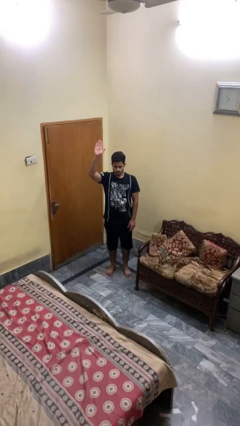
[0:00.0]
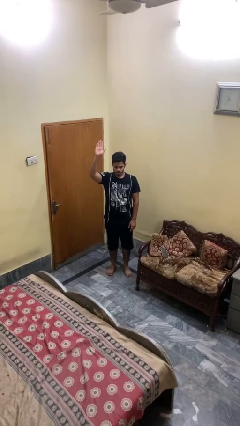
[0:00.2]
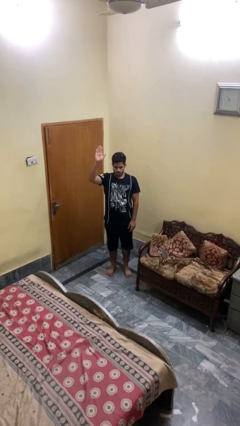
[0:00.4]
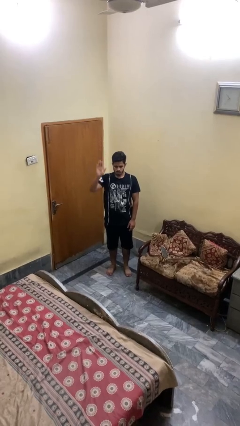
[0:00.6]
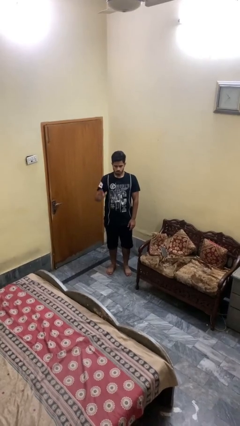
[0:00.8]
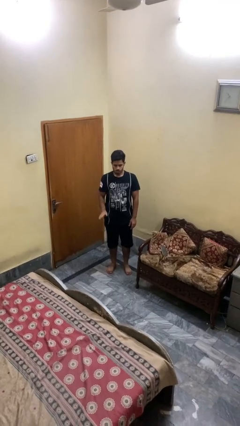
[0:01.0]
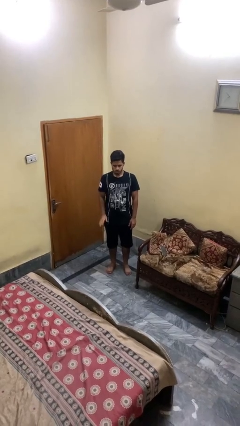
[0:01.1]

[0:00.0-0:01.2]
person gestures lower hand

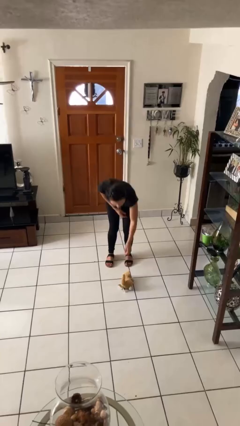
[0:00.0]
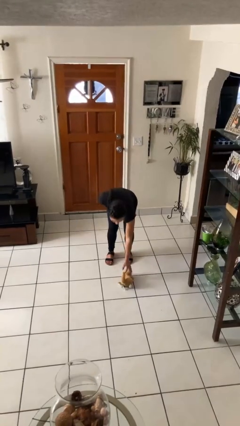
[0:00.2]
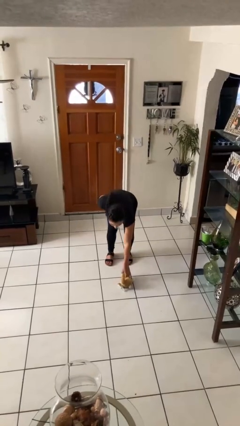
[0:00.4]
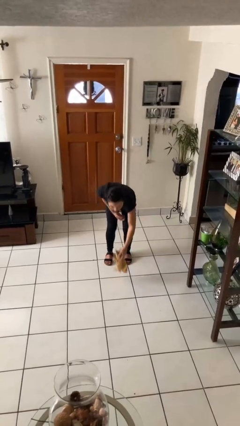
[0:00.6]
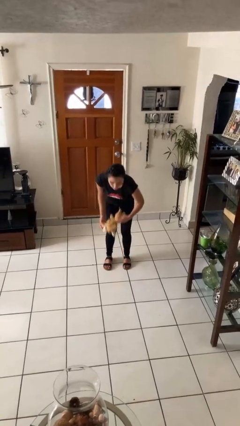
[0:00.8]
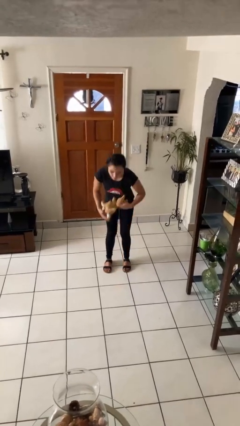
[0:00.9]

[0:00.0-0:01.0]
person picks up object from floor

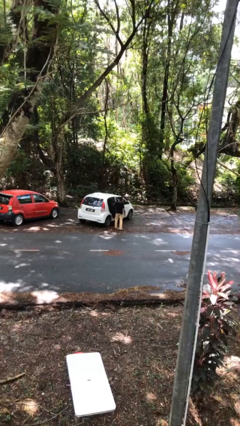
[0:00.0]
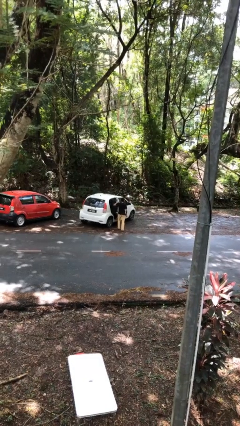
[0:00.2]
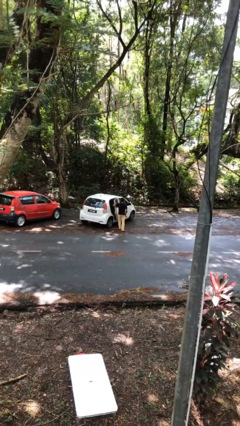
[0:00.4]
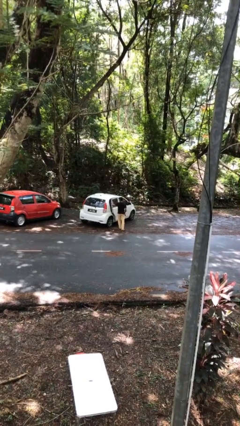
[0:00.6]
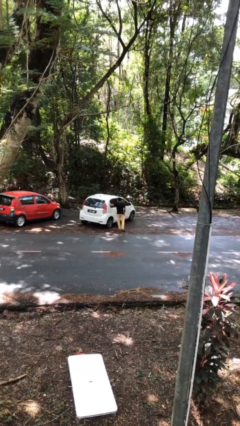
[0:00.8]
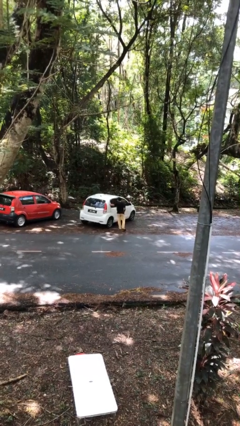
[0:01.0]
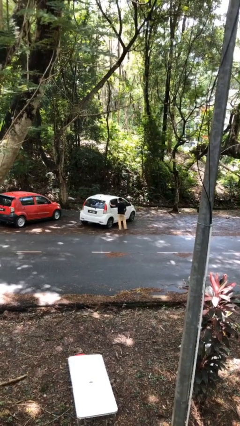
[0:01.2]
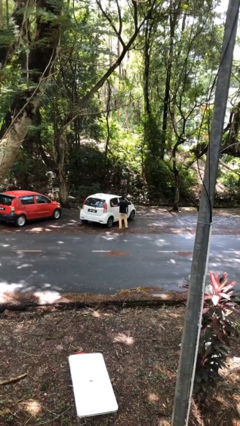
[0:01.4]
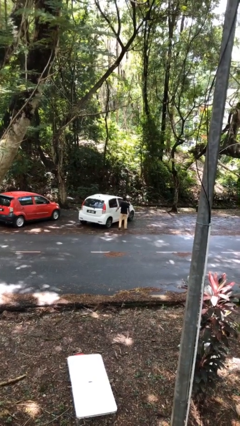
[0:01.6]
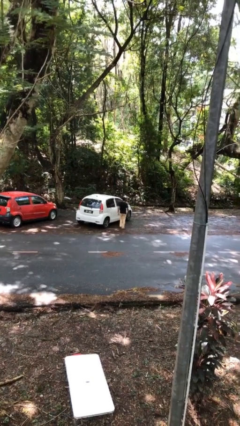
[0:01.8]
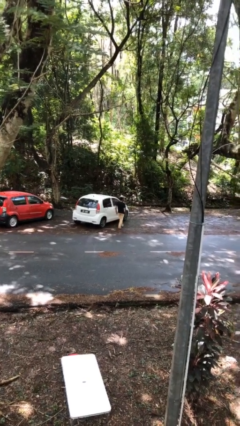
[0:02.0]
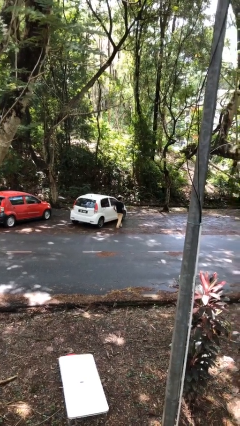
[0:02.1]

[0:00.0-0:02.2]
person closes car door

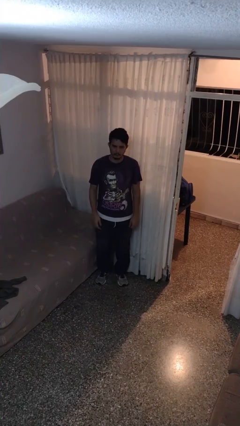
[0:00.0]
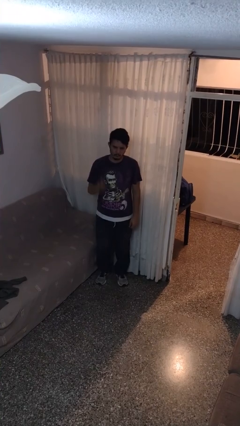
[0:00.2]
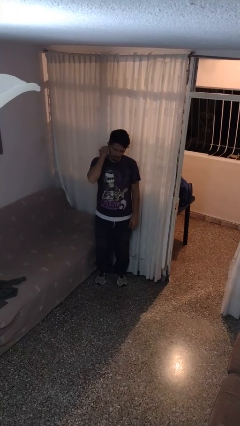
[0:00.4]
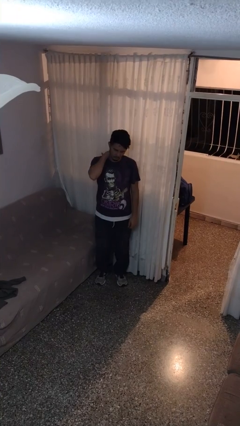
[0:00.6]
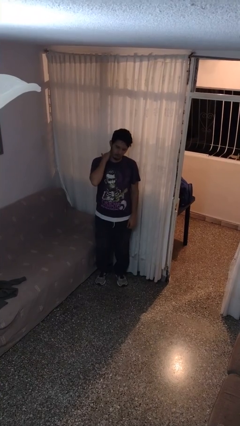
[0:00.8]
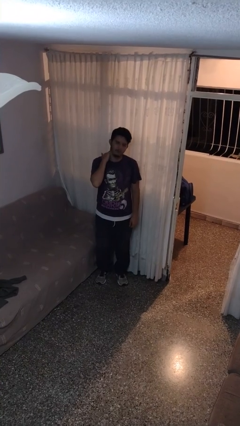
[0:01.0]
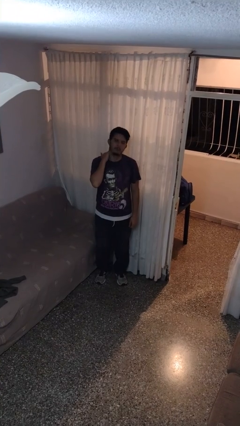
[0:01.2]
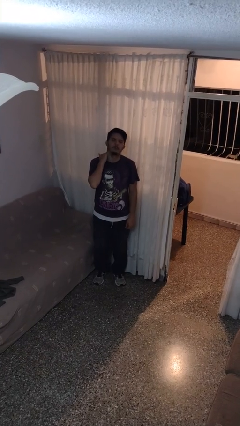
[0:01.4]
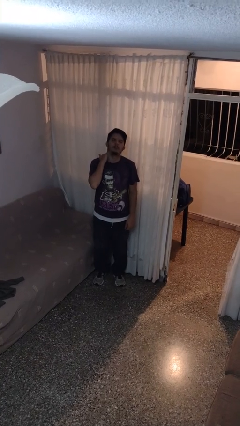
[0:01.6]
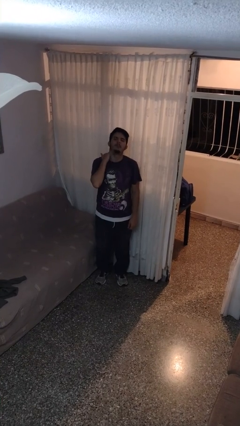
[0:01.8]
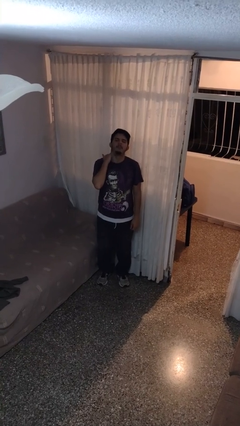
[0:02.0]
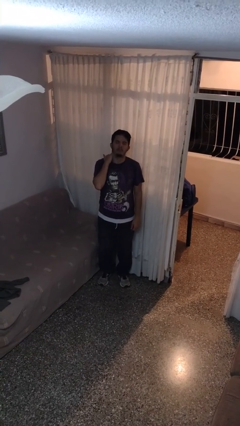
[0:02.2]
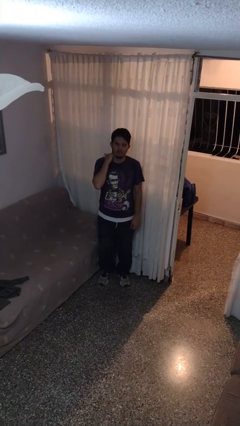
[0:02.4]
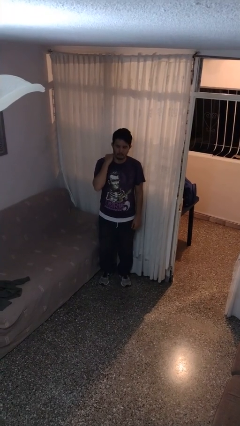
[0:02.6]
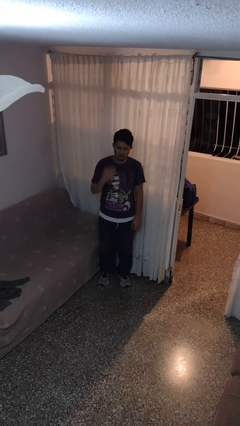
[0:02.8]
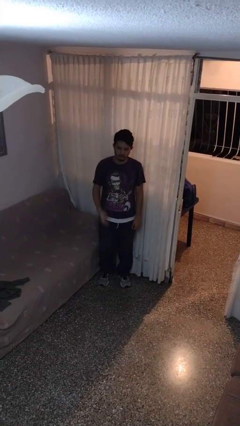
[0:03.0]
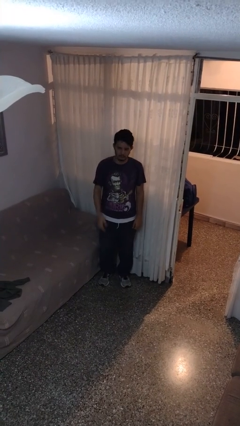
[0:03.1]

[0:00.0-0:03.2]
person rubs neck

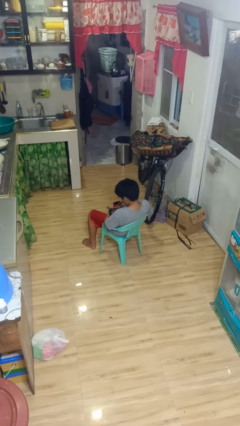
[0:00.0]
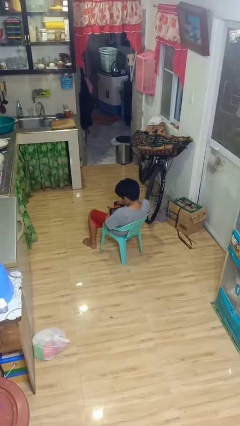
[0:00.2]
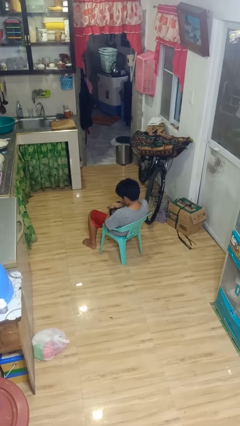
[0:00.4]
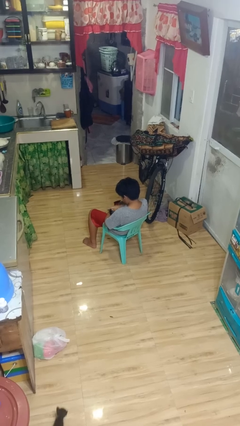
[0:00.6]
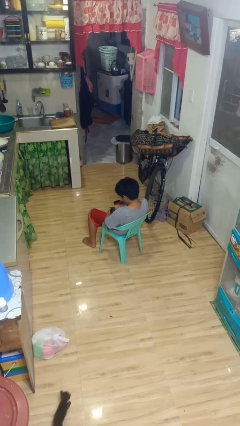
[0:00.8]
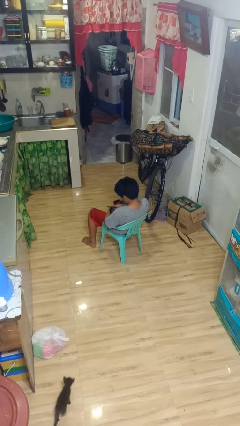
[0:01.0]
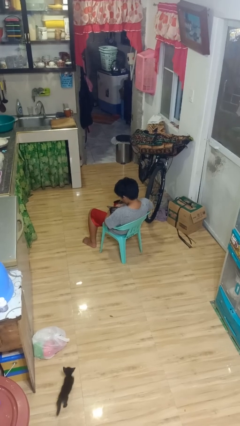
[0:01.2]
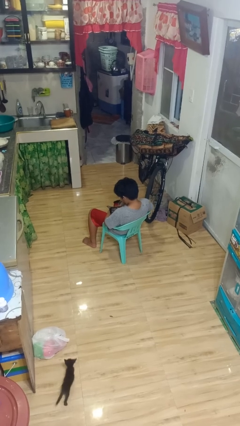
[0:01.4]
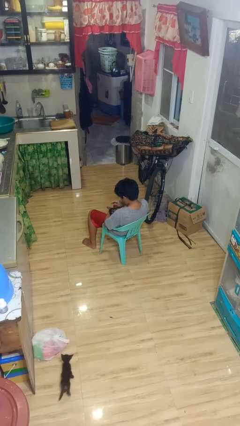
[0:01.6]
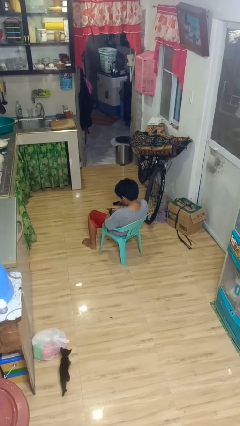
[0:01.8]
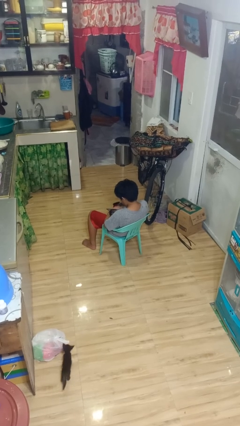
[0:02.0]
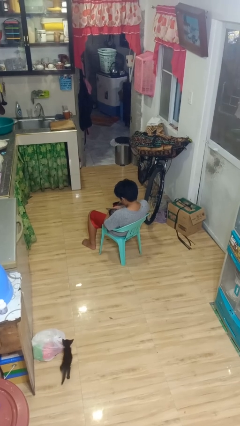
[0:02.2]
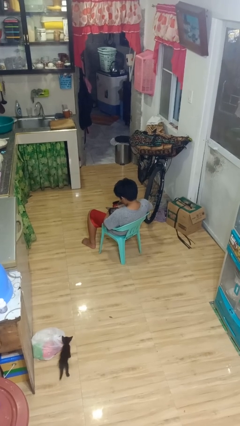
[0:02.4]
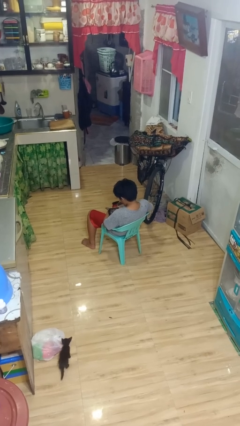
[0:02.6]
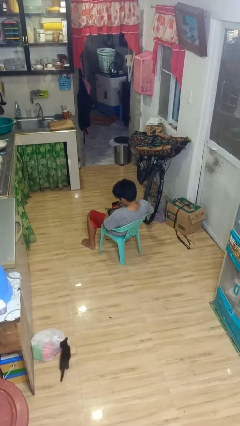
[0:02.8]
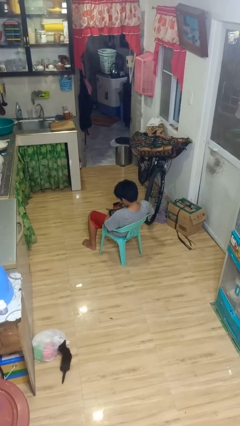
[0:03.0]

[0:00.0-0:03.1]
person pets cat

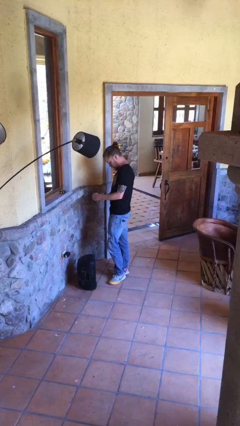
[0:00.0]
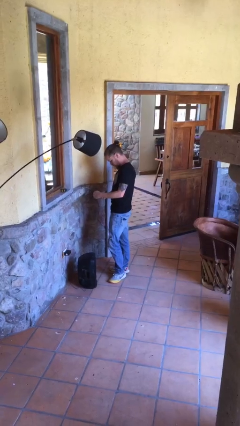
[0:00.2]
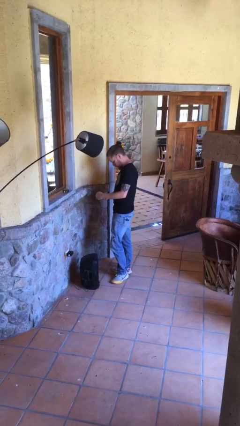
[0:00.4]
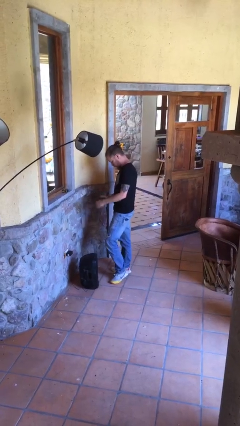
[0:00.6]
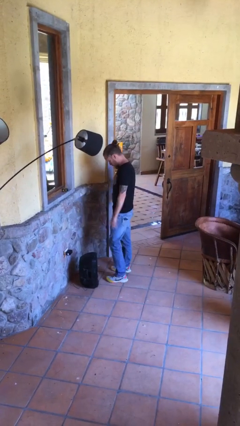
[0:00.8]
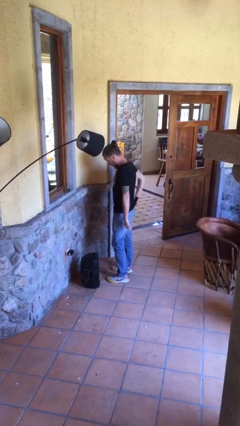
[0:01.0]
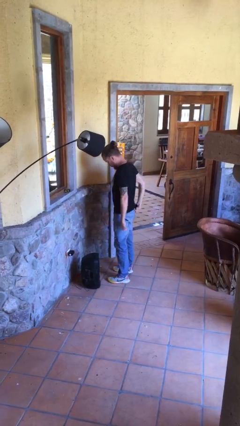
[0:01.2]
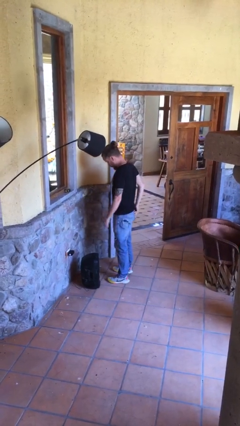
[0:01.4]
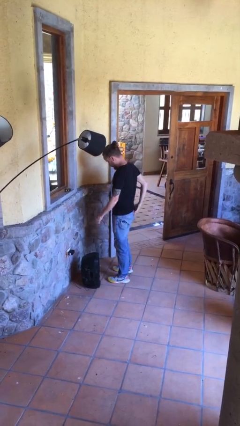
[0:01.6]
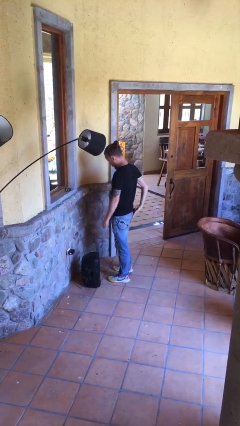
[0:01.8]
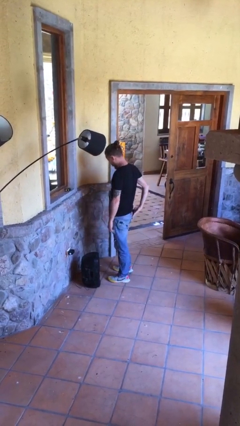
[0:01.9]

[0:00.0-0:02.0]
person puts phone into pocket

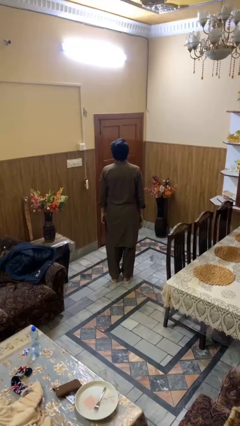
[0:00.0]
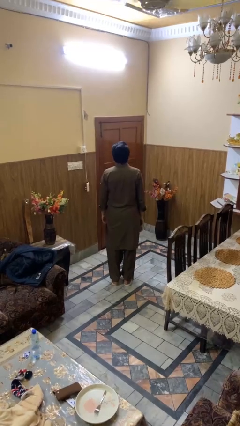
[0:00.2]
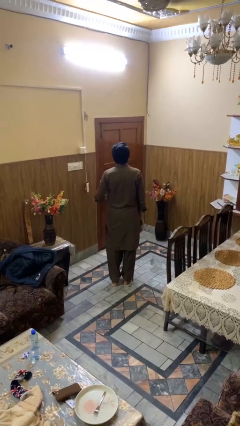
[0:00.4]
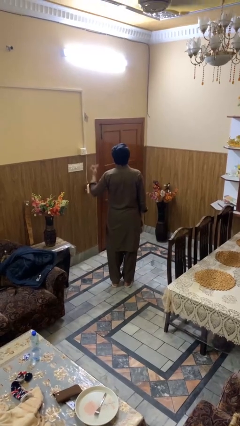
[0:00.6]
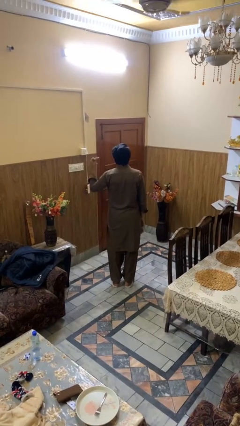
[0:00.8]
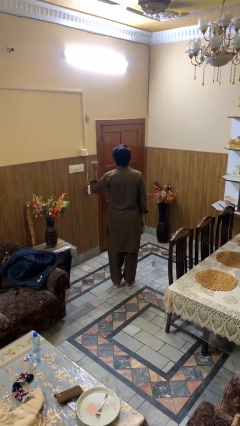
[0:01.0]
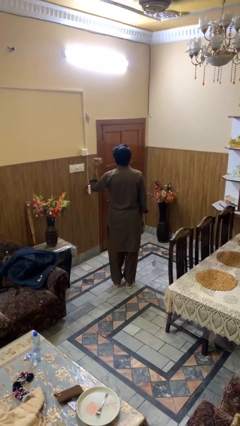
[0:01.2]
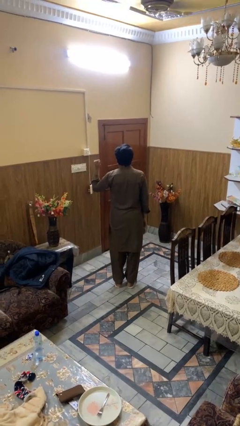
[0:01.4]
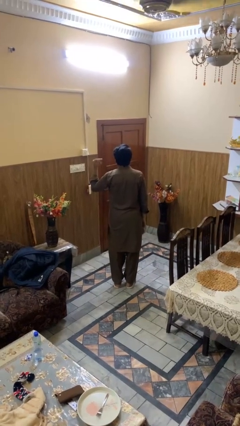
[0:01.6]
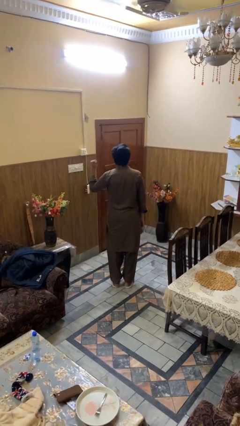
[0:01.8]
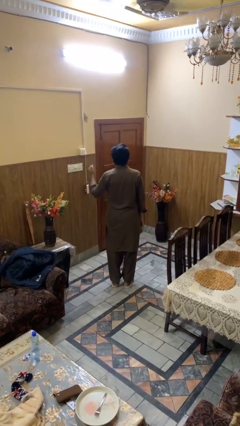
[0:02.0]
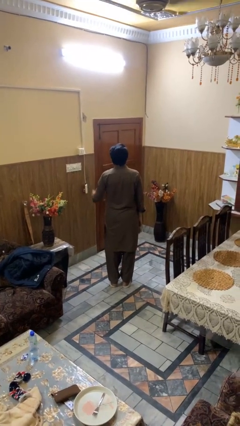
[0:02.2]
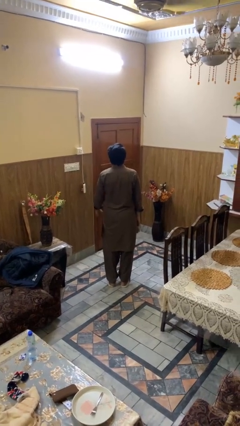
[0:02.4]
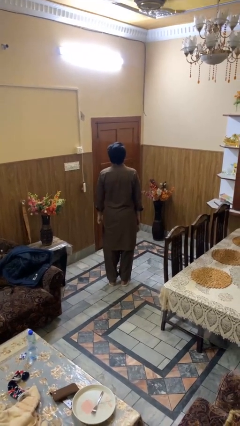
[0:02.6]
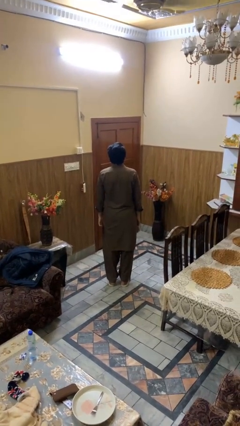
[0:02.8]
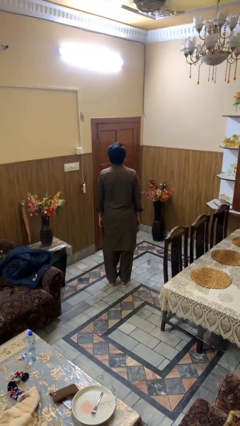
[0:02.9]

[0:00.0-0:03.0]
person snaps fingers

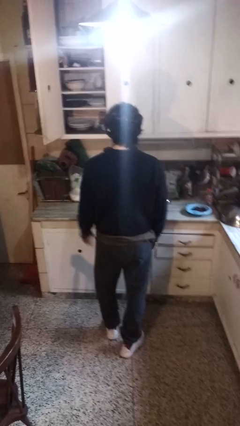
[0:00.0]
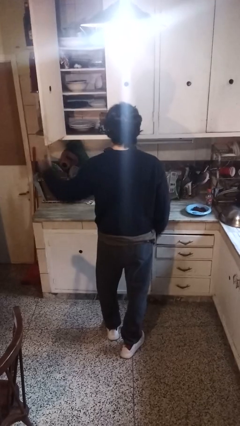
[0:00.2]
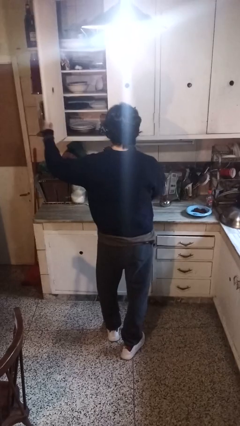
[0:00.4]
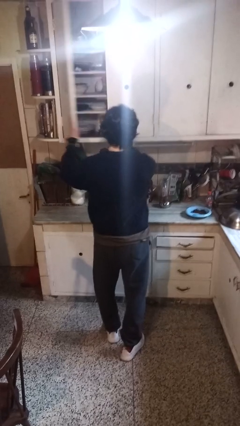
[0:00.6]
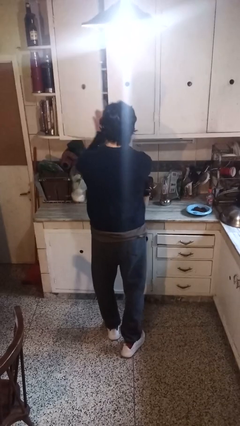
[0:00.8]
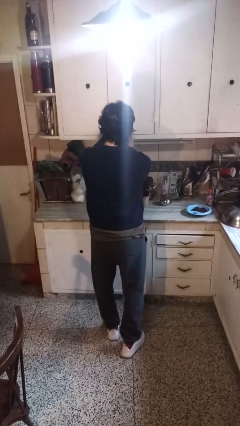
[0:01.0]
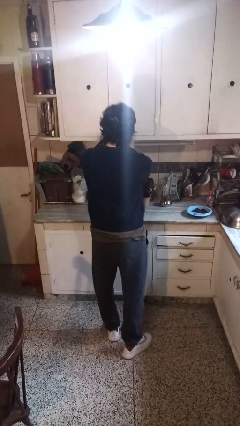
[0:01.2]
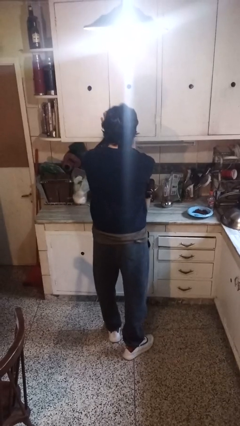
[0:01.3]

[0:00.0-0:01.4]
person closes cabinet
